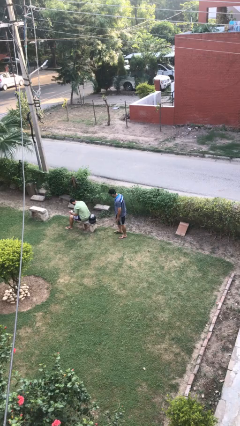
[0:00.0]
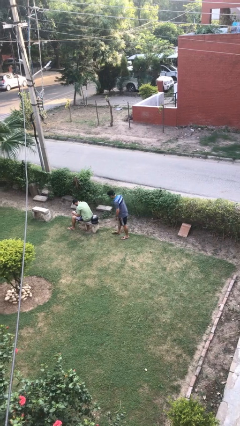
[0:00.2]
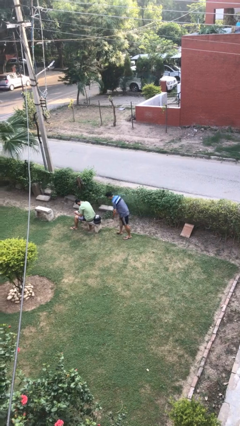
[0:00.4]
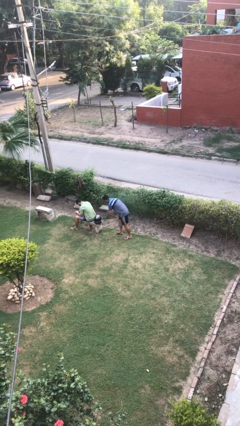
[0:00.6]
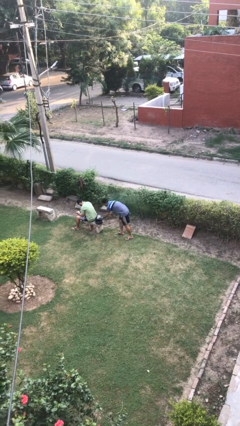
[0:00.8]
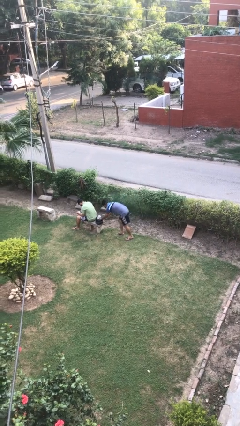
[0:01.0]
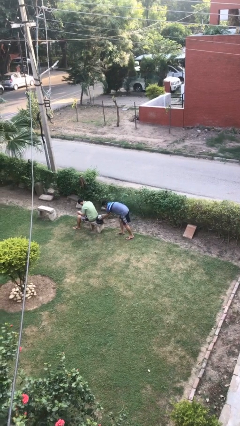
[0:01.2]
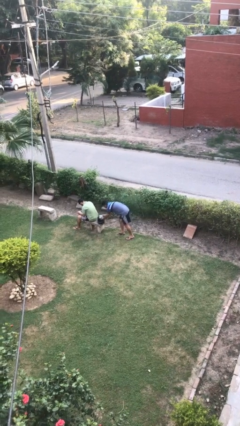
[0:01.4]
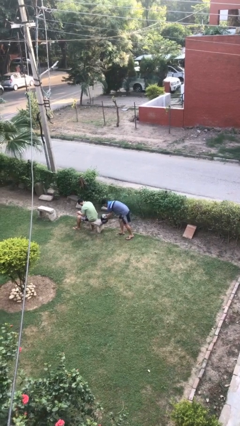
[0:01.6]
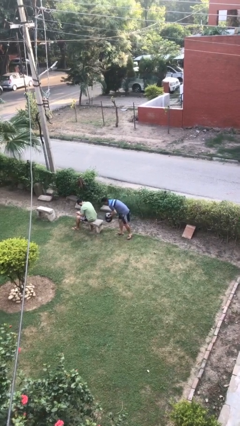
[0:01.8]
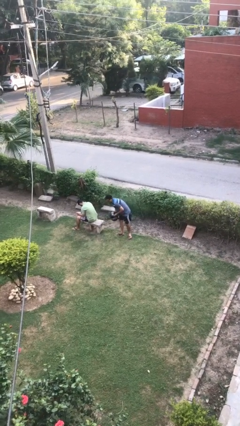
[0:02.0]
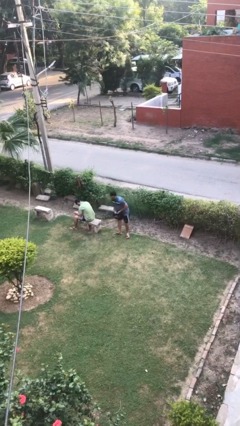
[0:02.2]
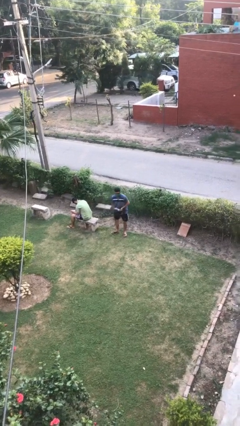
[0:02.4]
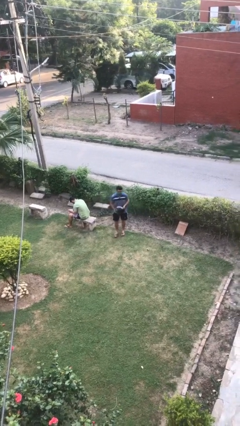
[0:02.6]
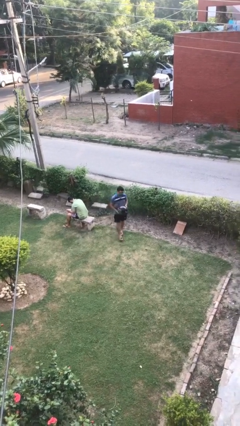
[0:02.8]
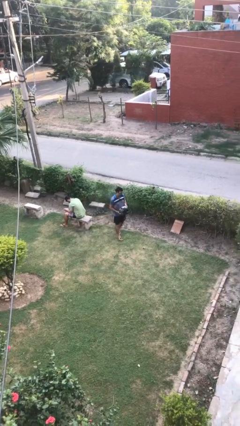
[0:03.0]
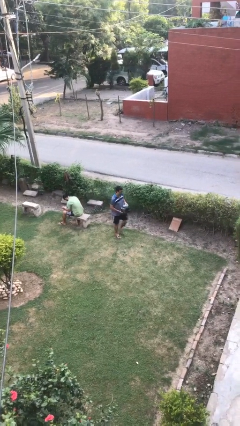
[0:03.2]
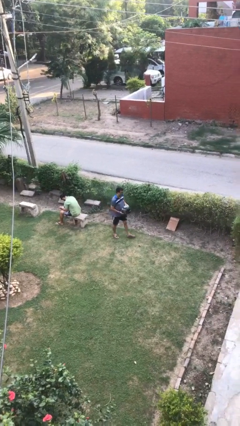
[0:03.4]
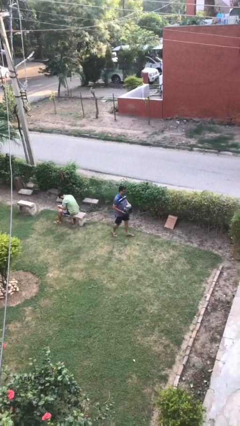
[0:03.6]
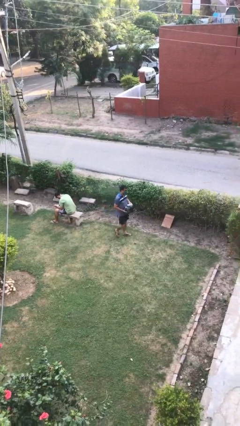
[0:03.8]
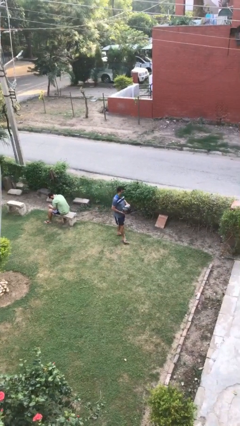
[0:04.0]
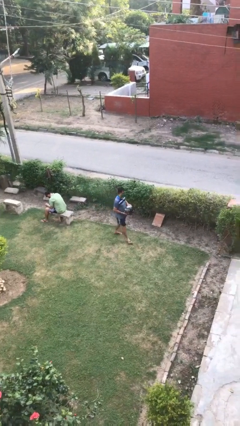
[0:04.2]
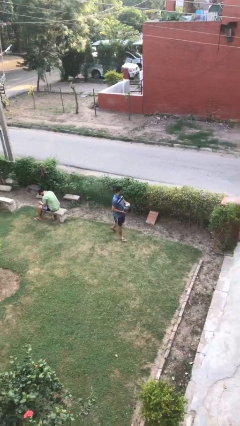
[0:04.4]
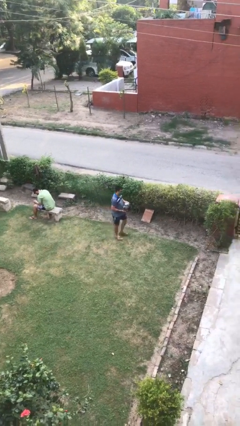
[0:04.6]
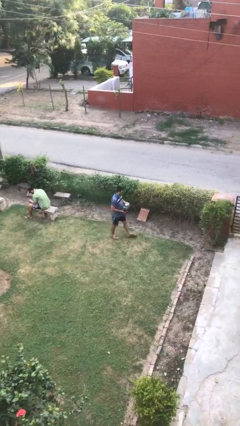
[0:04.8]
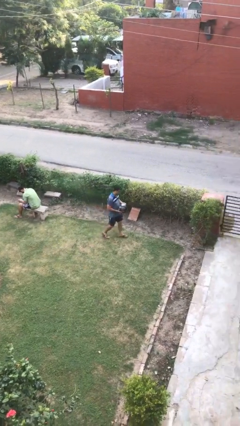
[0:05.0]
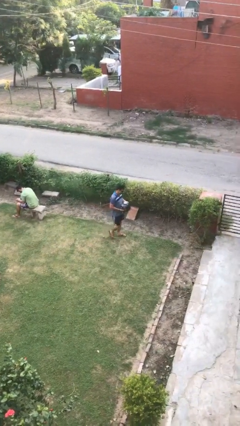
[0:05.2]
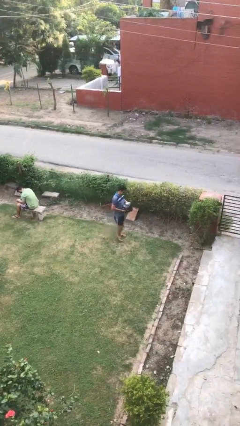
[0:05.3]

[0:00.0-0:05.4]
person steals object from person

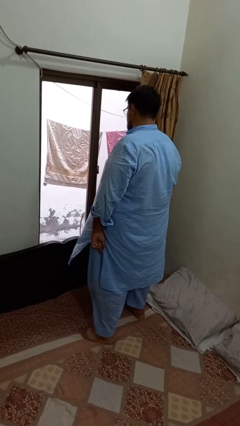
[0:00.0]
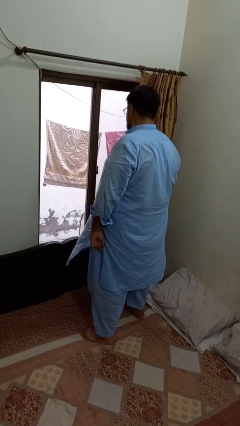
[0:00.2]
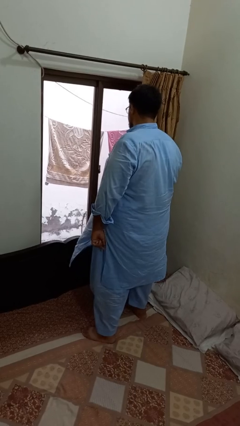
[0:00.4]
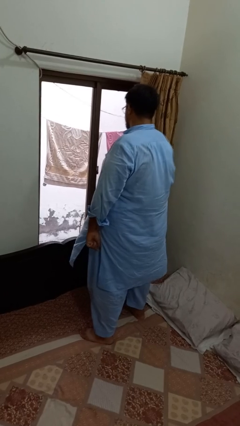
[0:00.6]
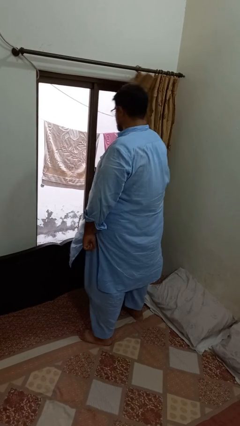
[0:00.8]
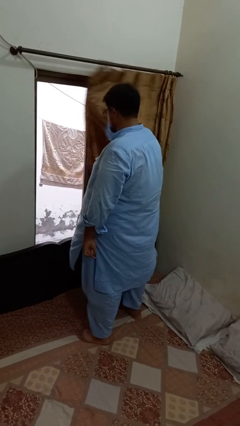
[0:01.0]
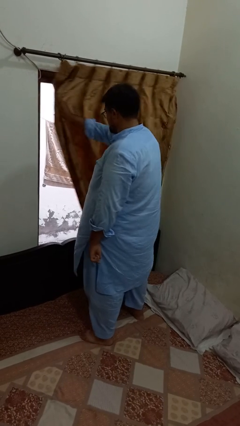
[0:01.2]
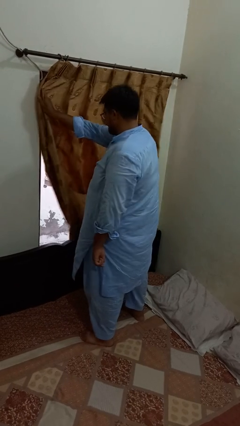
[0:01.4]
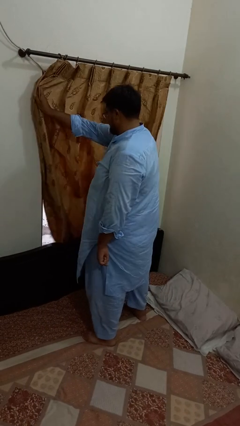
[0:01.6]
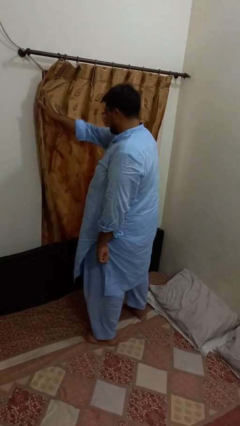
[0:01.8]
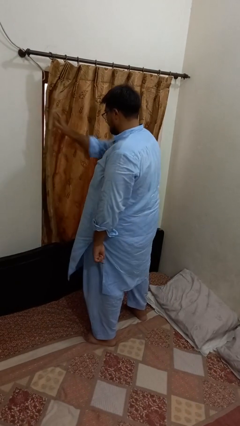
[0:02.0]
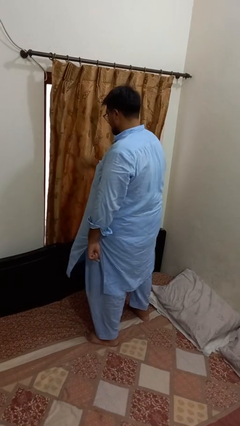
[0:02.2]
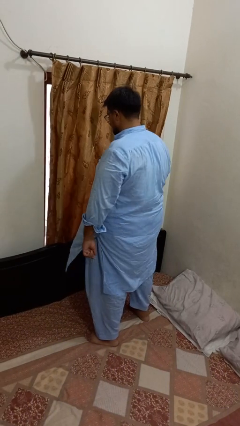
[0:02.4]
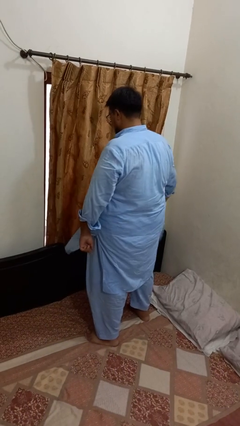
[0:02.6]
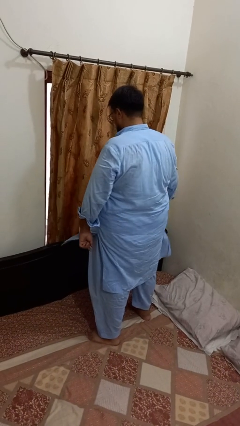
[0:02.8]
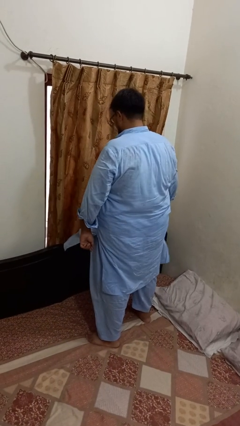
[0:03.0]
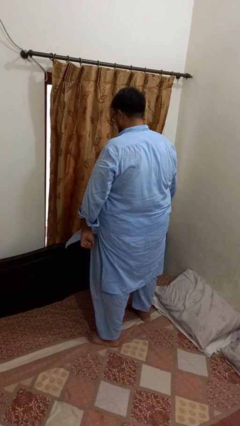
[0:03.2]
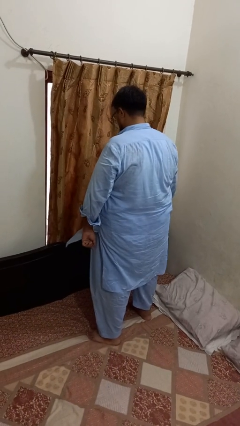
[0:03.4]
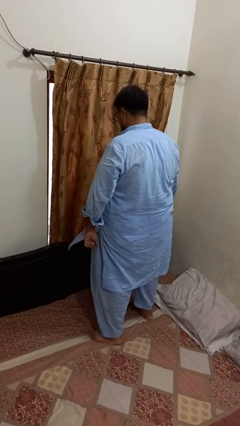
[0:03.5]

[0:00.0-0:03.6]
person closes curtains

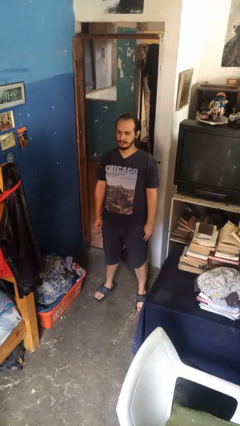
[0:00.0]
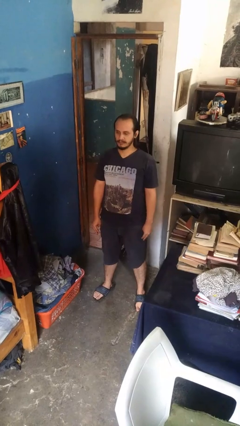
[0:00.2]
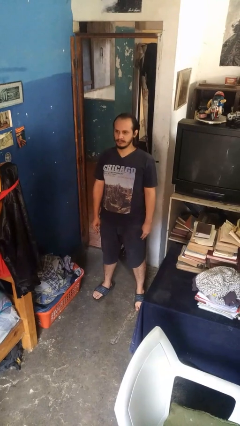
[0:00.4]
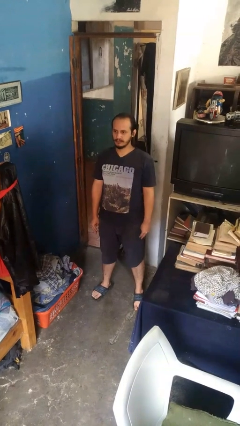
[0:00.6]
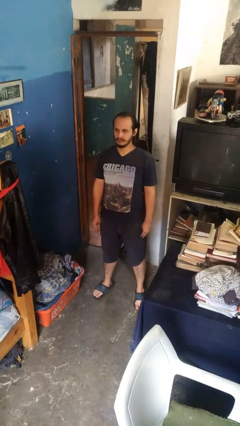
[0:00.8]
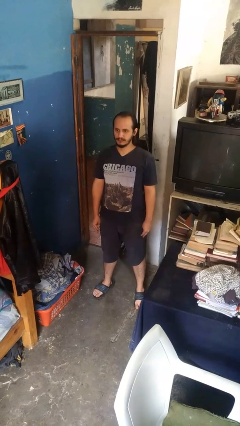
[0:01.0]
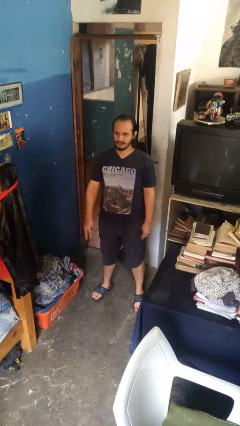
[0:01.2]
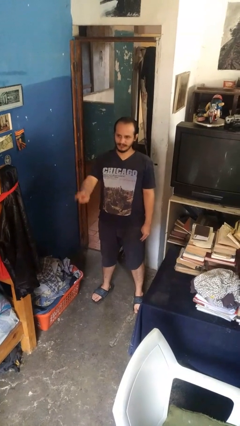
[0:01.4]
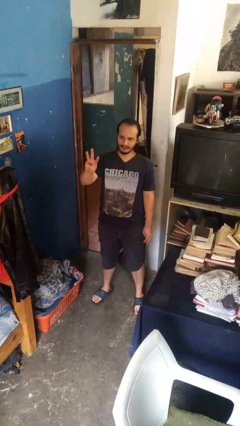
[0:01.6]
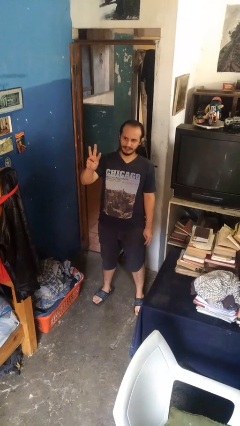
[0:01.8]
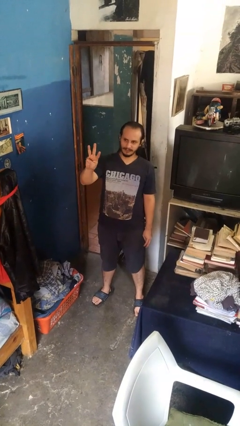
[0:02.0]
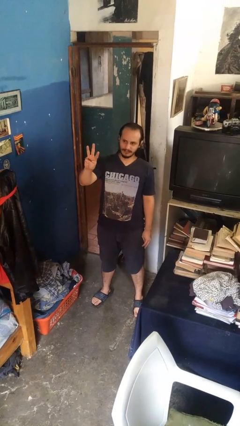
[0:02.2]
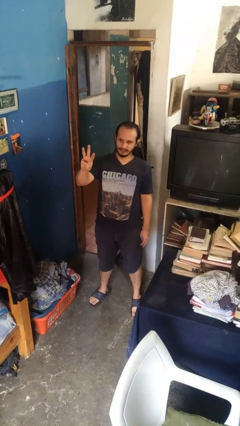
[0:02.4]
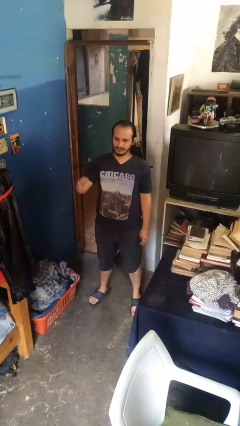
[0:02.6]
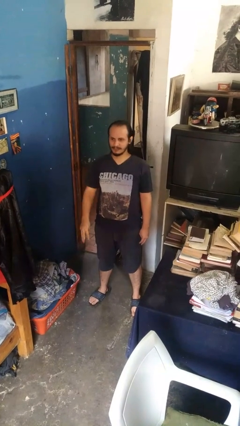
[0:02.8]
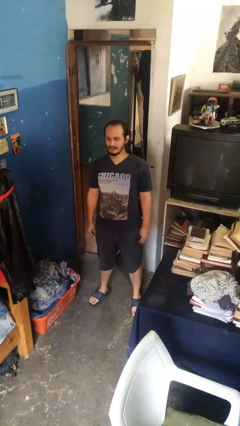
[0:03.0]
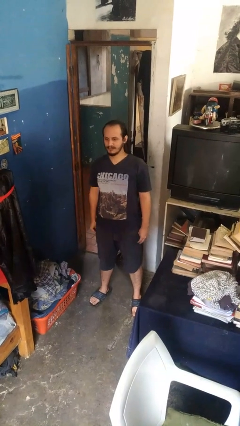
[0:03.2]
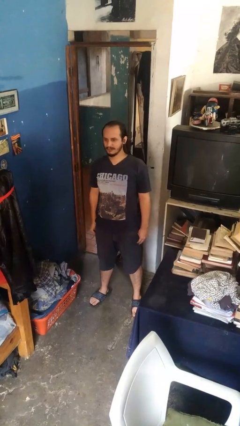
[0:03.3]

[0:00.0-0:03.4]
person gestures number three

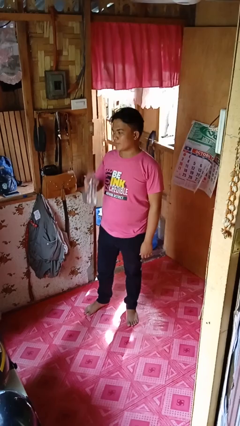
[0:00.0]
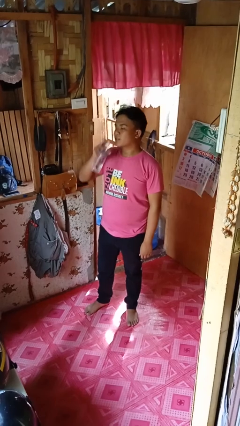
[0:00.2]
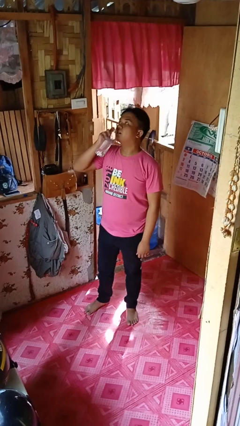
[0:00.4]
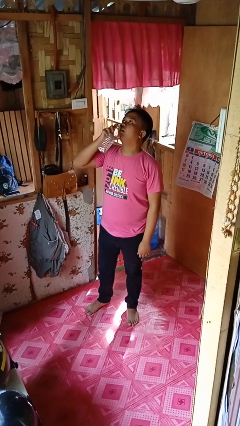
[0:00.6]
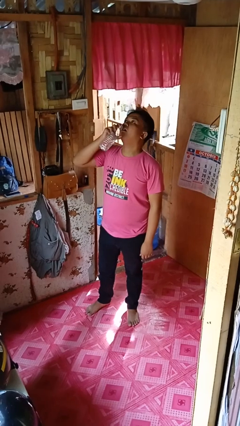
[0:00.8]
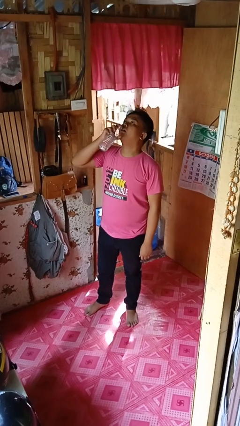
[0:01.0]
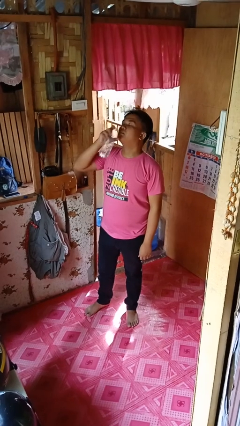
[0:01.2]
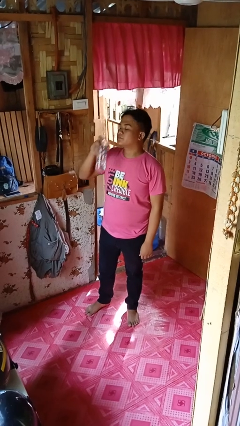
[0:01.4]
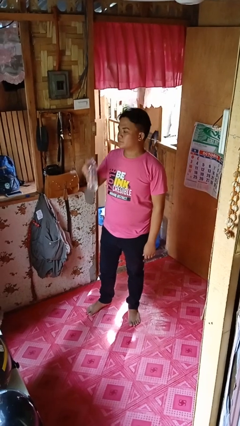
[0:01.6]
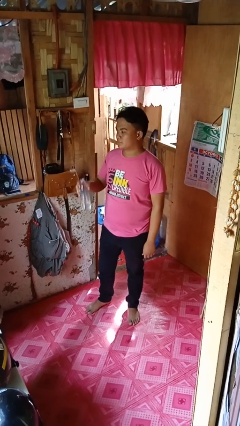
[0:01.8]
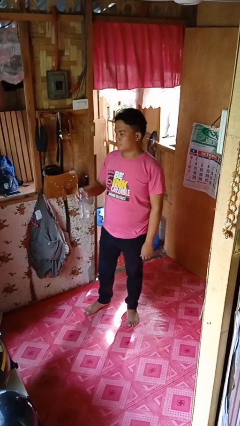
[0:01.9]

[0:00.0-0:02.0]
person drinks from bottle

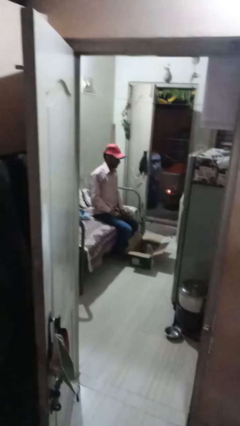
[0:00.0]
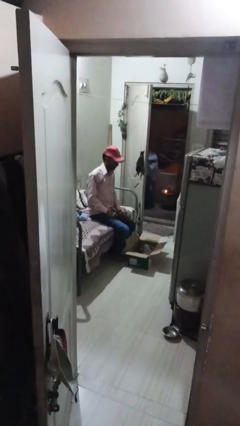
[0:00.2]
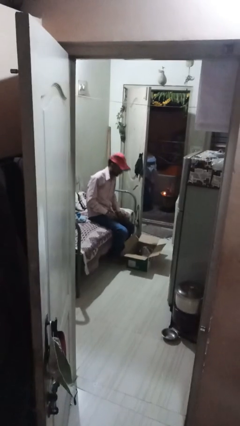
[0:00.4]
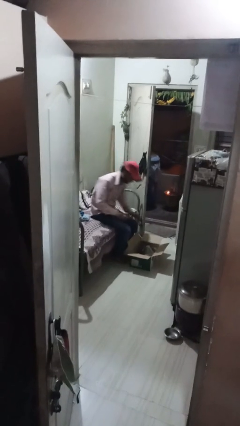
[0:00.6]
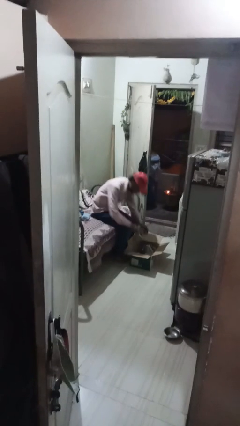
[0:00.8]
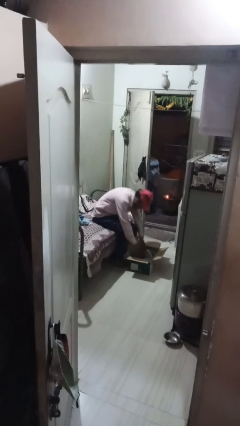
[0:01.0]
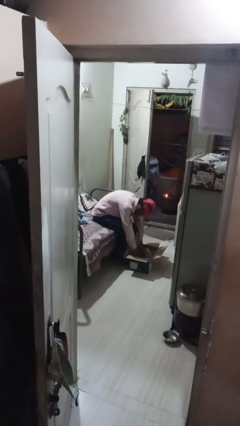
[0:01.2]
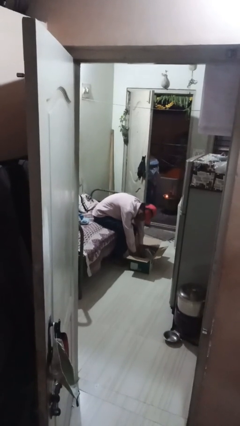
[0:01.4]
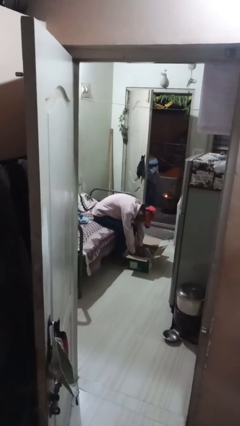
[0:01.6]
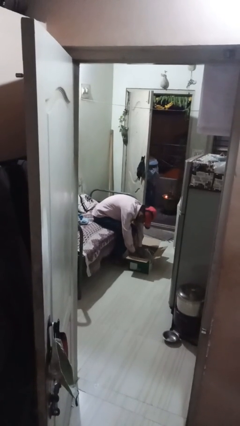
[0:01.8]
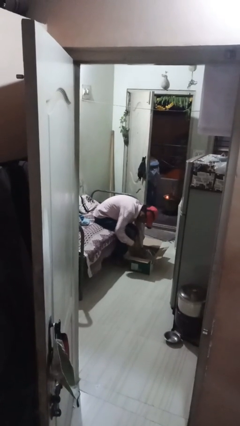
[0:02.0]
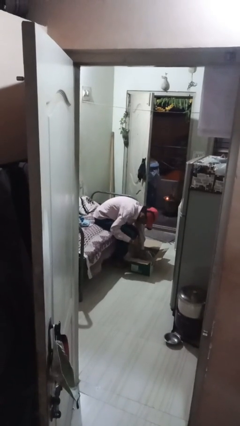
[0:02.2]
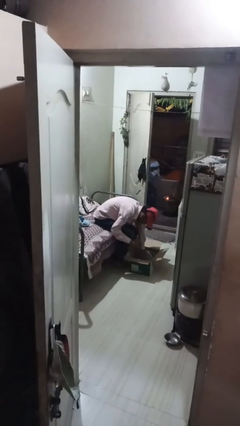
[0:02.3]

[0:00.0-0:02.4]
person searches in box

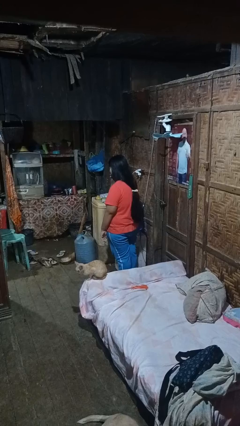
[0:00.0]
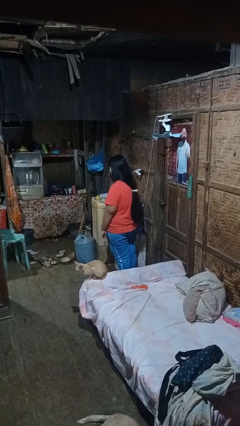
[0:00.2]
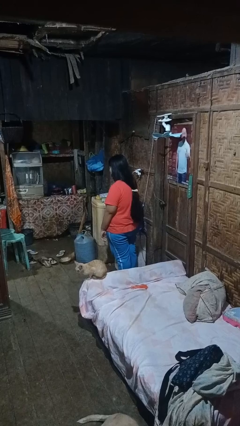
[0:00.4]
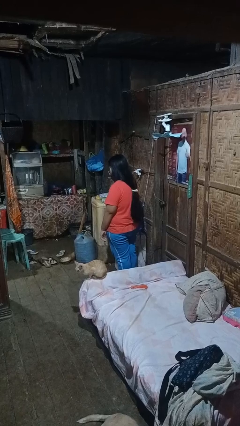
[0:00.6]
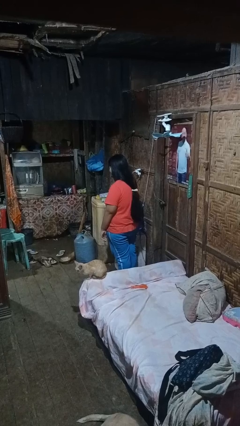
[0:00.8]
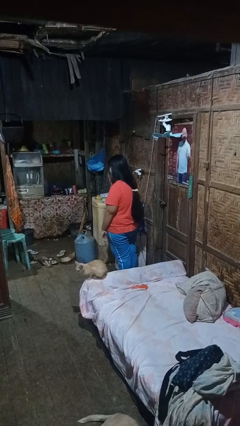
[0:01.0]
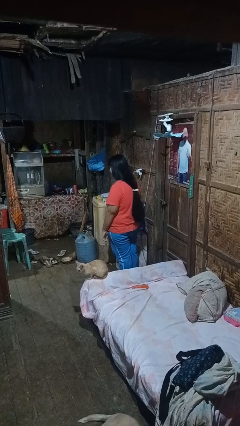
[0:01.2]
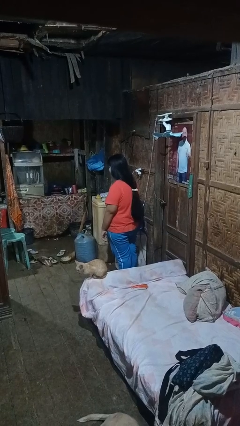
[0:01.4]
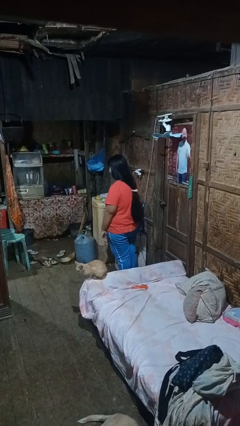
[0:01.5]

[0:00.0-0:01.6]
person licks fingers
